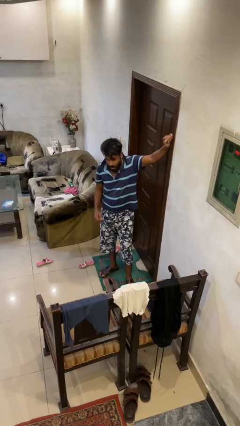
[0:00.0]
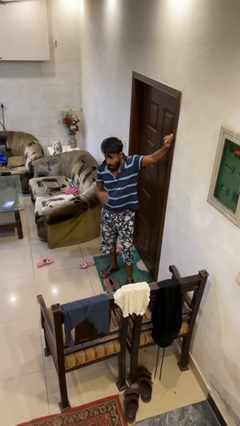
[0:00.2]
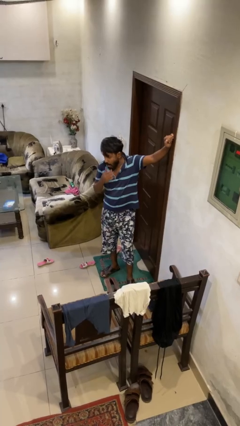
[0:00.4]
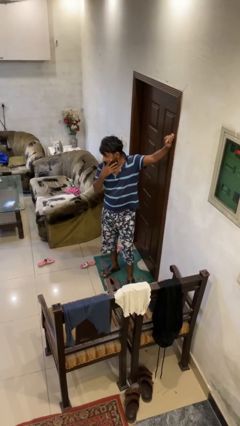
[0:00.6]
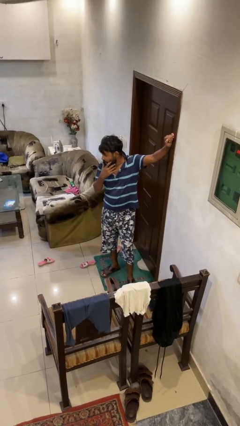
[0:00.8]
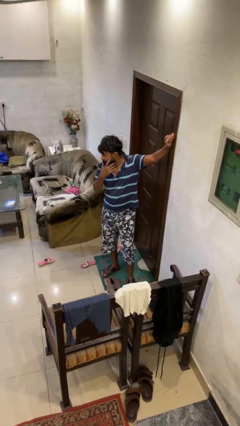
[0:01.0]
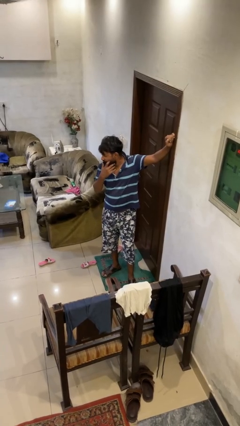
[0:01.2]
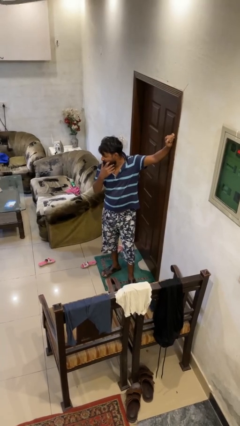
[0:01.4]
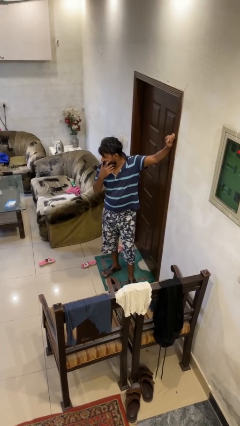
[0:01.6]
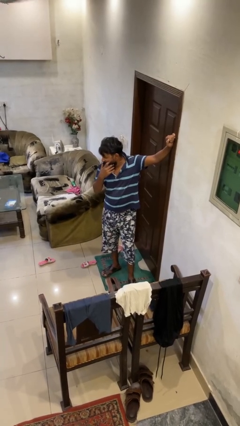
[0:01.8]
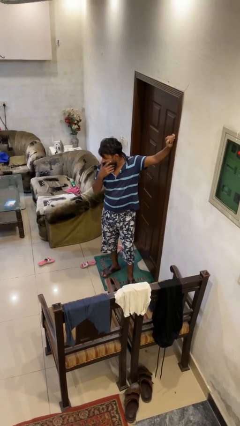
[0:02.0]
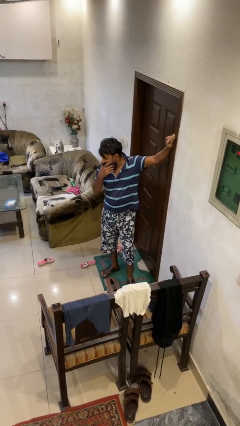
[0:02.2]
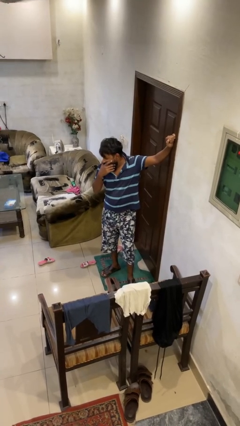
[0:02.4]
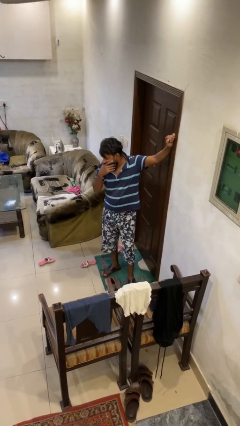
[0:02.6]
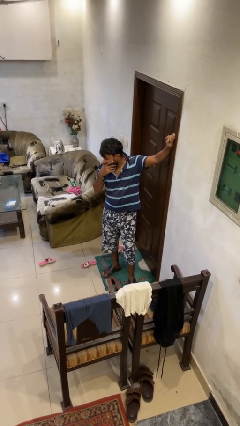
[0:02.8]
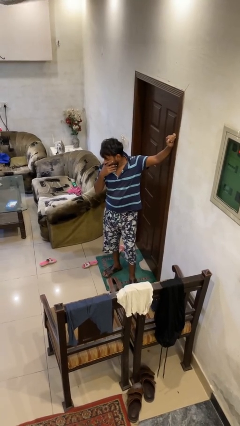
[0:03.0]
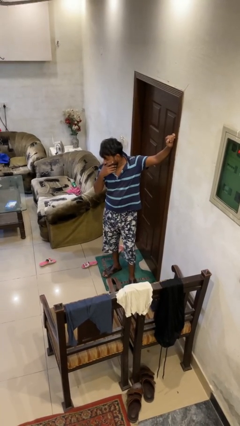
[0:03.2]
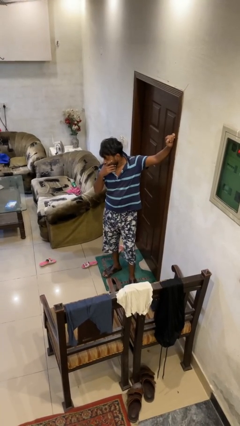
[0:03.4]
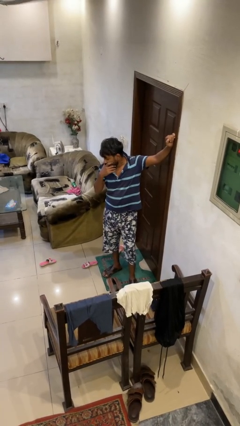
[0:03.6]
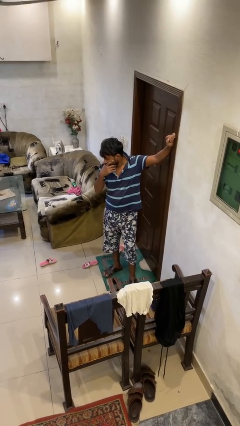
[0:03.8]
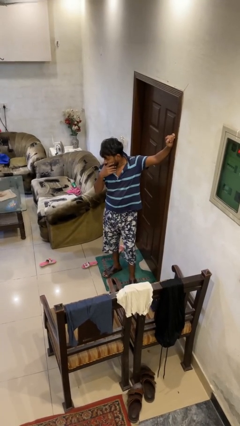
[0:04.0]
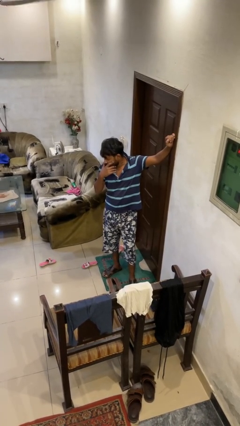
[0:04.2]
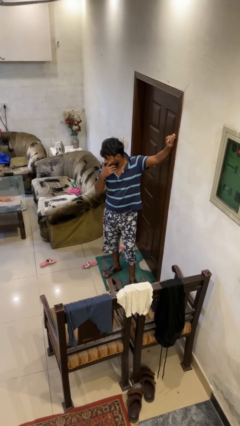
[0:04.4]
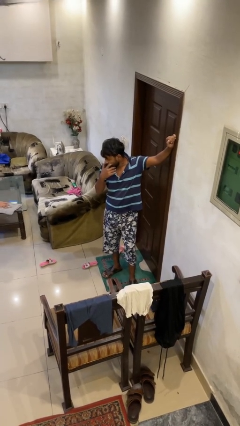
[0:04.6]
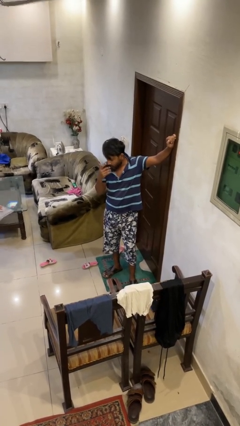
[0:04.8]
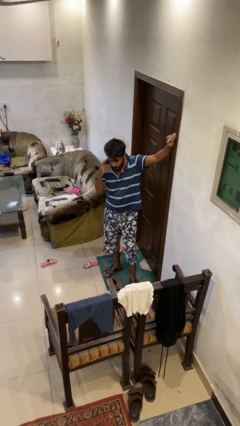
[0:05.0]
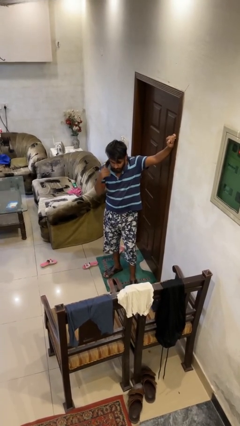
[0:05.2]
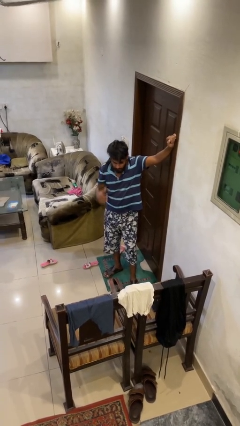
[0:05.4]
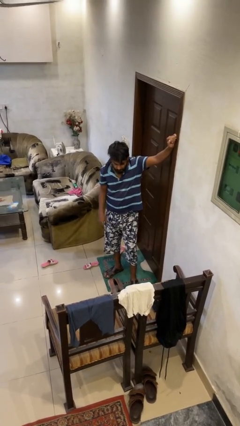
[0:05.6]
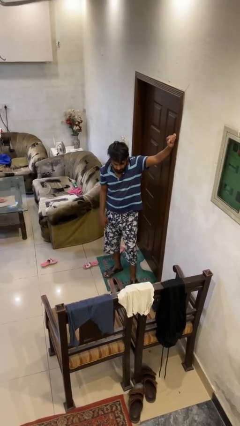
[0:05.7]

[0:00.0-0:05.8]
person scratches face

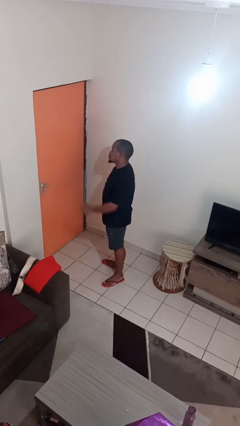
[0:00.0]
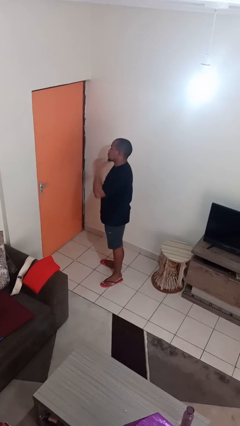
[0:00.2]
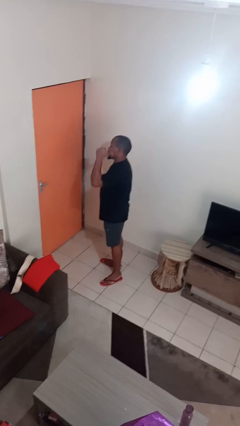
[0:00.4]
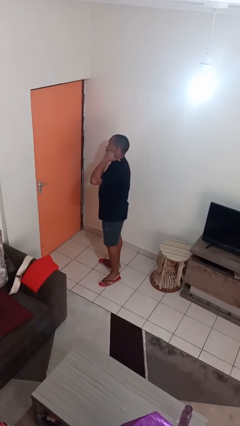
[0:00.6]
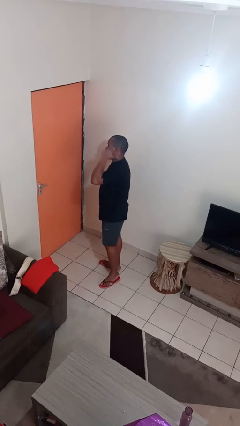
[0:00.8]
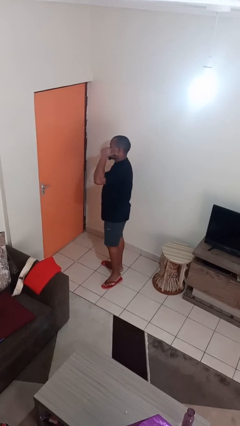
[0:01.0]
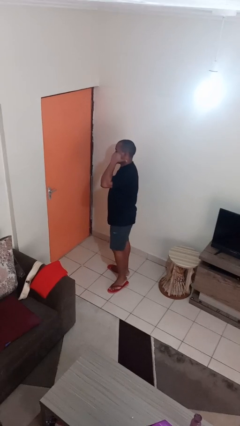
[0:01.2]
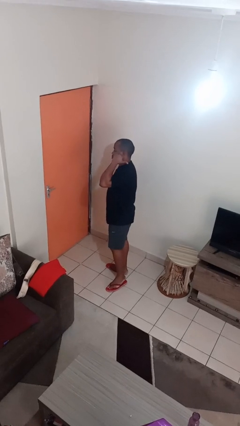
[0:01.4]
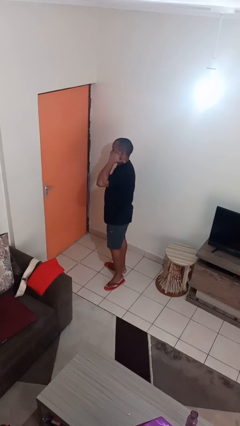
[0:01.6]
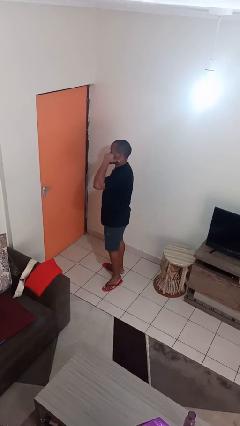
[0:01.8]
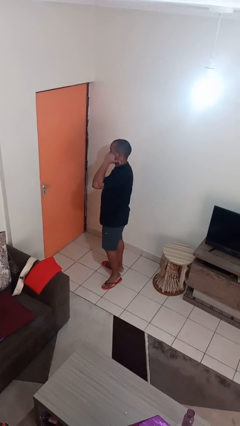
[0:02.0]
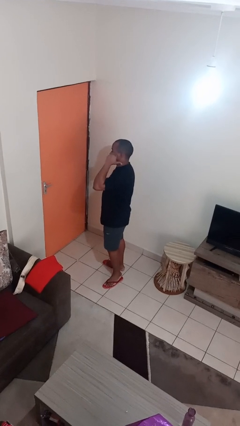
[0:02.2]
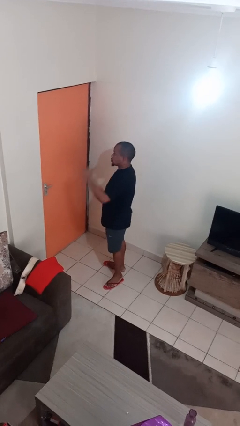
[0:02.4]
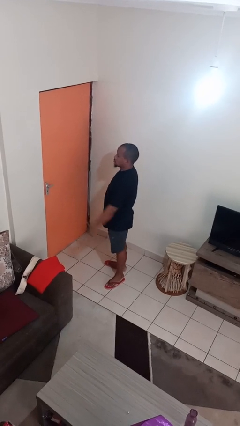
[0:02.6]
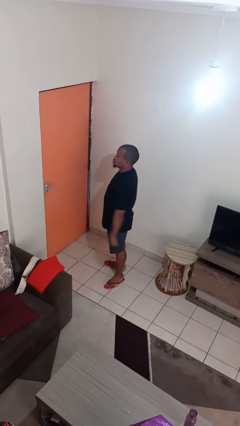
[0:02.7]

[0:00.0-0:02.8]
person gestures behind me

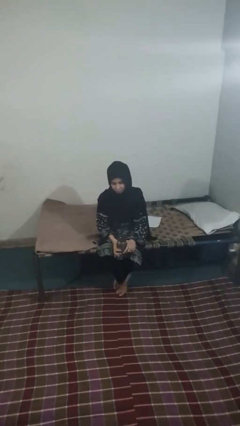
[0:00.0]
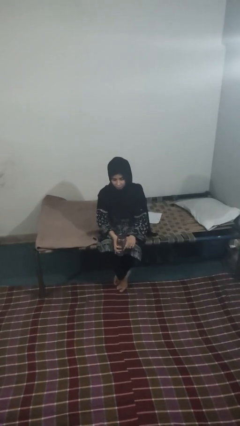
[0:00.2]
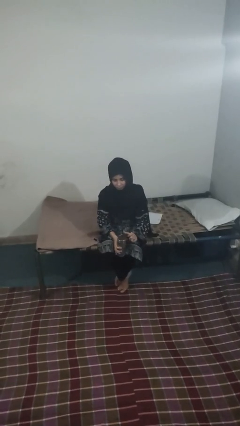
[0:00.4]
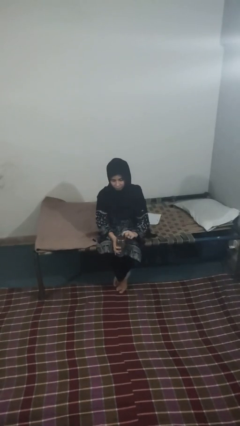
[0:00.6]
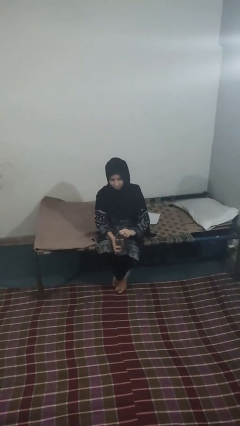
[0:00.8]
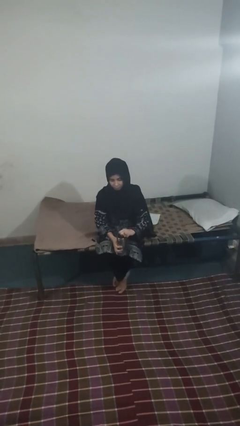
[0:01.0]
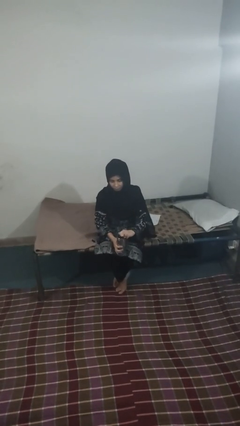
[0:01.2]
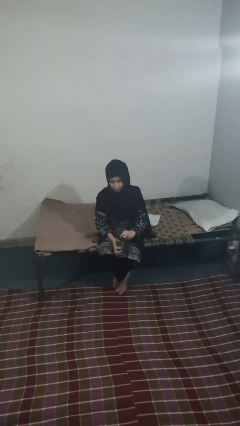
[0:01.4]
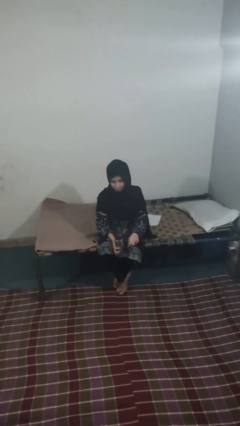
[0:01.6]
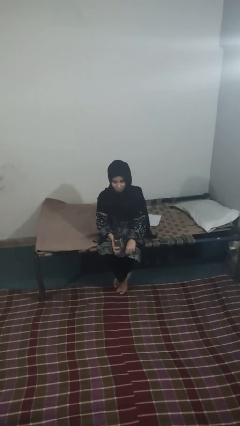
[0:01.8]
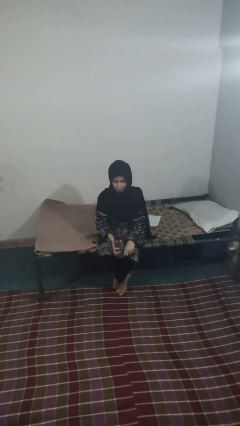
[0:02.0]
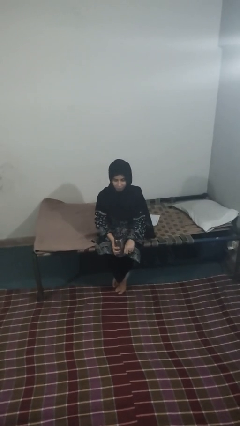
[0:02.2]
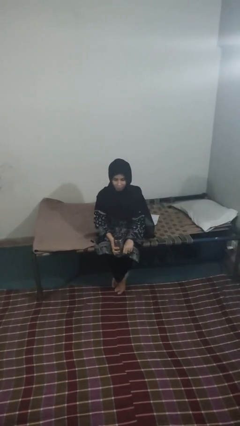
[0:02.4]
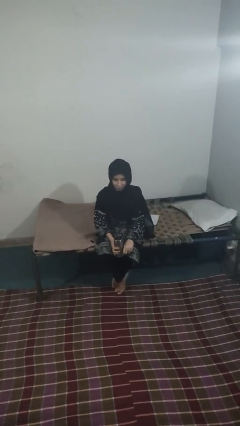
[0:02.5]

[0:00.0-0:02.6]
person opens beverage can

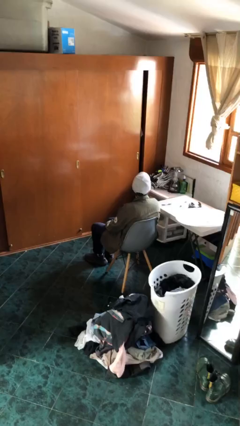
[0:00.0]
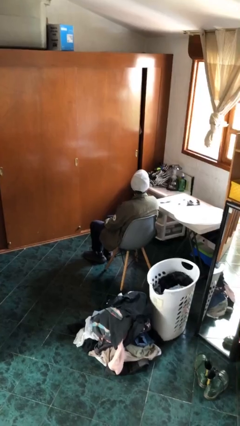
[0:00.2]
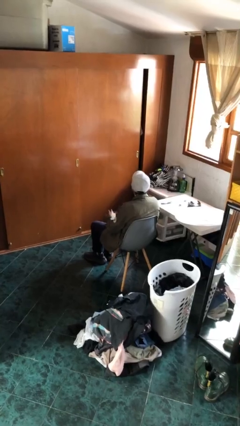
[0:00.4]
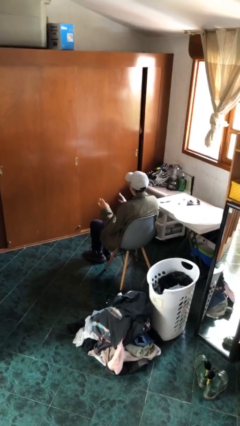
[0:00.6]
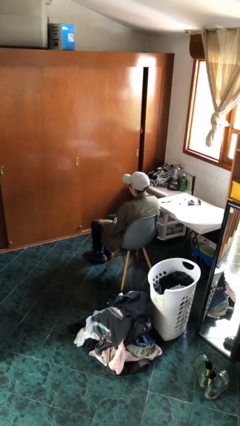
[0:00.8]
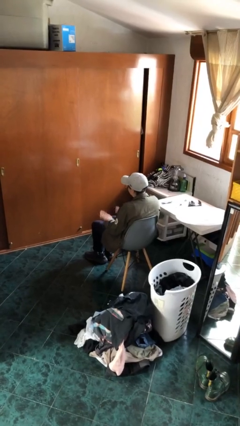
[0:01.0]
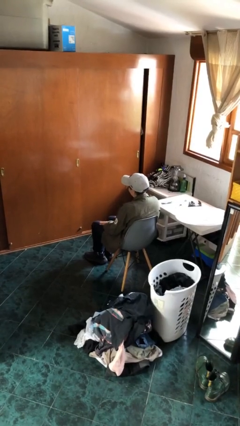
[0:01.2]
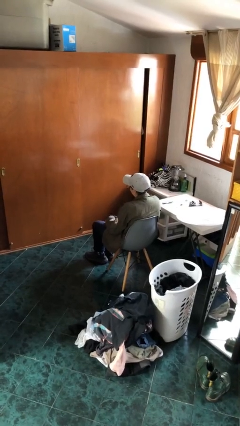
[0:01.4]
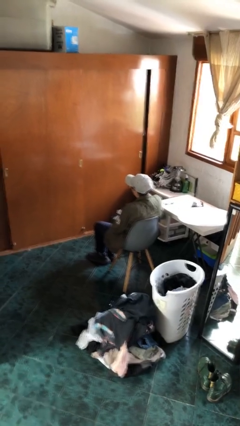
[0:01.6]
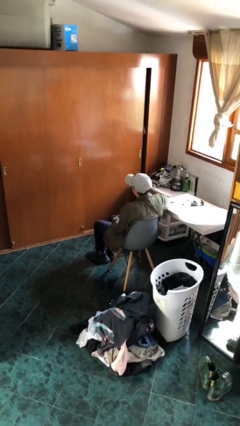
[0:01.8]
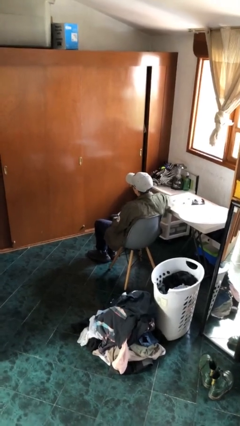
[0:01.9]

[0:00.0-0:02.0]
person slaps hands on thighs

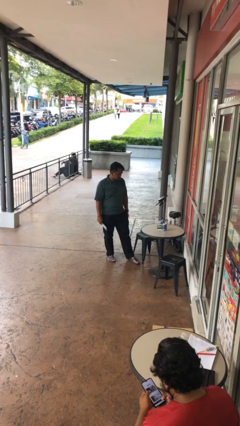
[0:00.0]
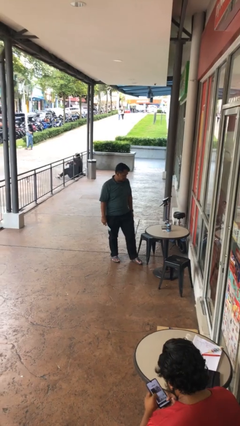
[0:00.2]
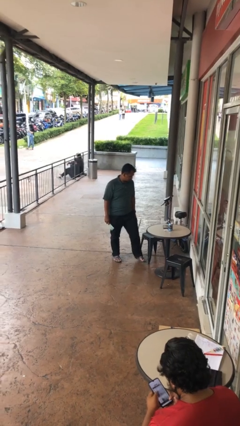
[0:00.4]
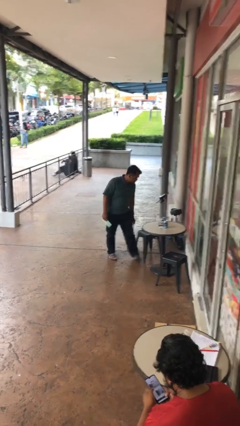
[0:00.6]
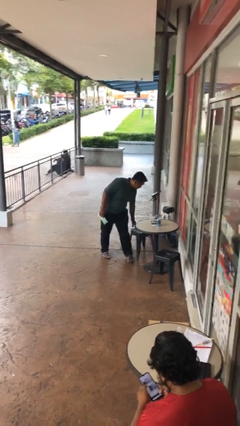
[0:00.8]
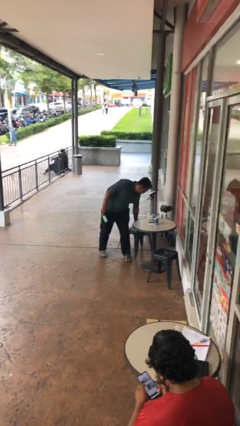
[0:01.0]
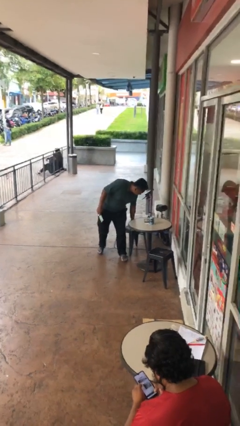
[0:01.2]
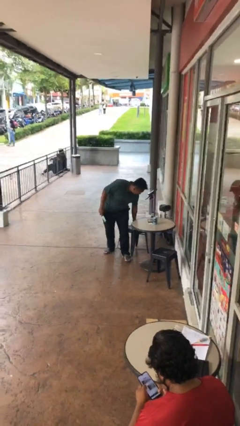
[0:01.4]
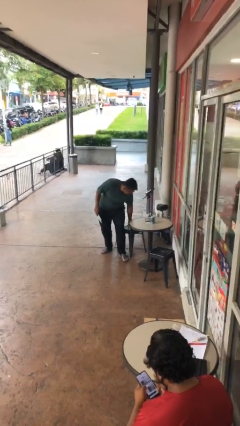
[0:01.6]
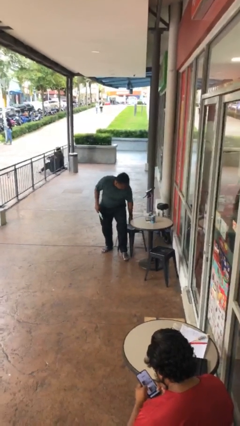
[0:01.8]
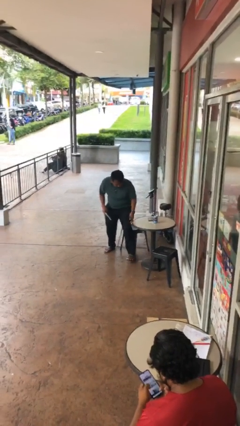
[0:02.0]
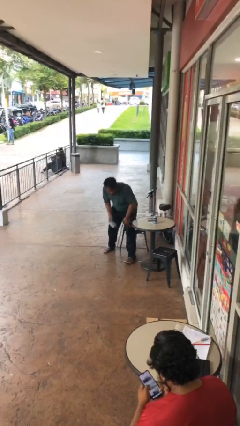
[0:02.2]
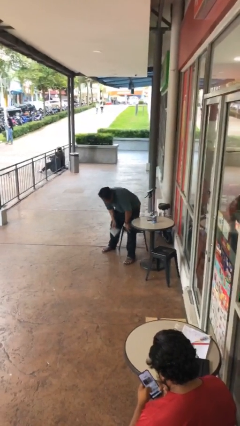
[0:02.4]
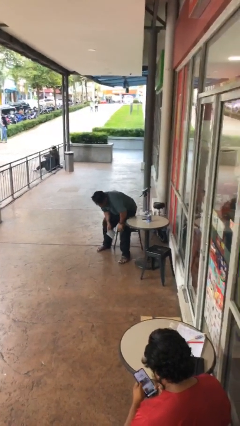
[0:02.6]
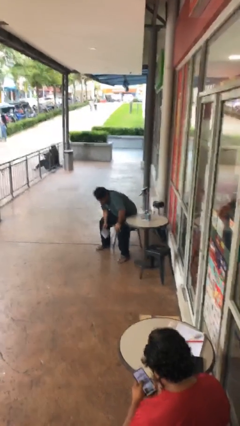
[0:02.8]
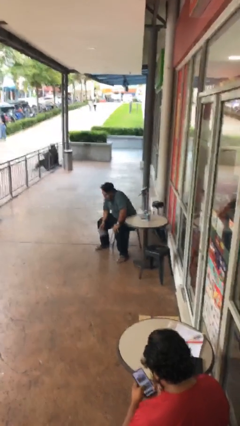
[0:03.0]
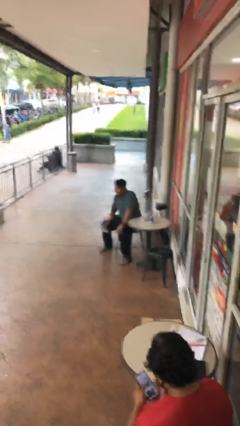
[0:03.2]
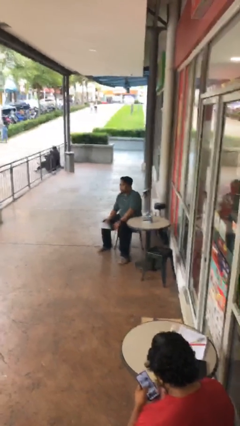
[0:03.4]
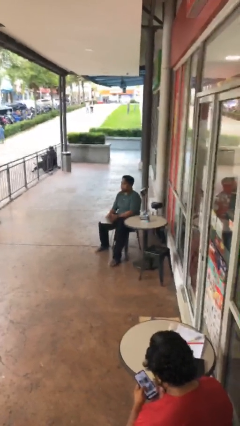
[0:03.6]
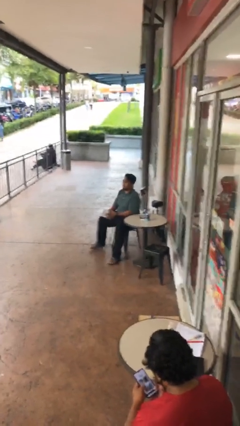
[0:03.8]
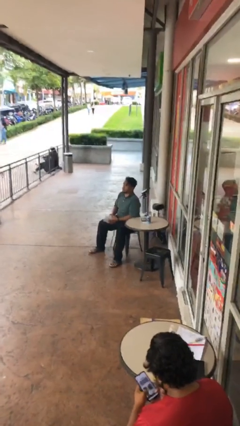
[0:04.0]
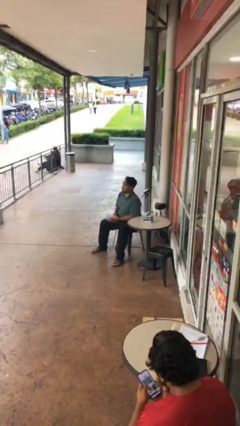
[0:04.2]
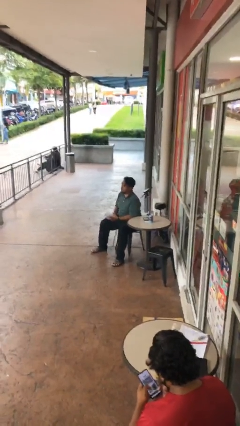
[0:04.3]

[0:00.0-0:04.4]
person sits down

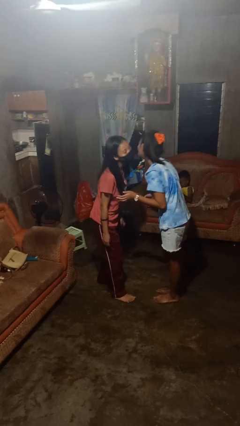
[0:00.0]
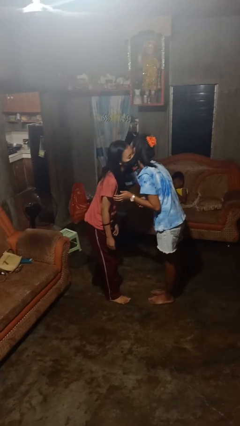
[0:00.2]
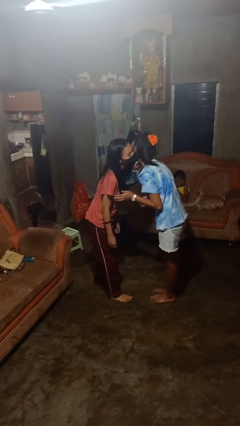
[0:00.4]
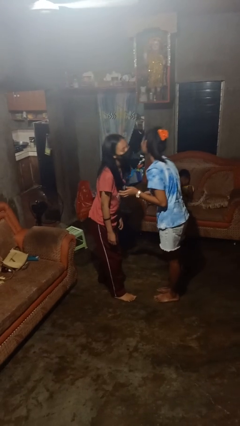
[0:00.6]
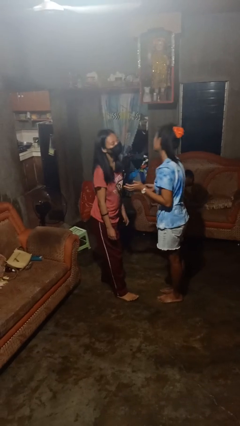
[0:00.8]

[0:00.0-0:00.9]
person kisses cheek of person
